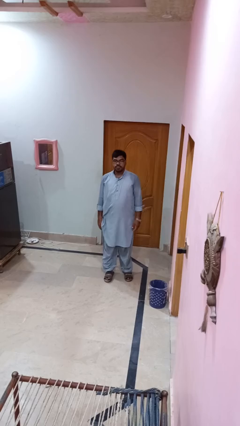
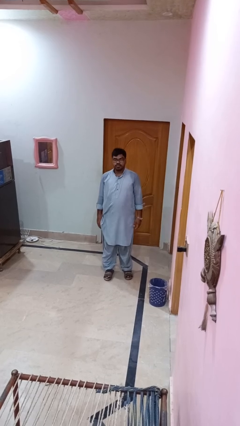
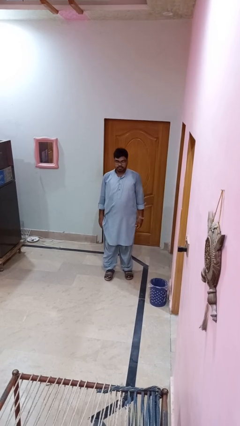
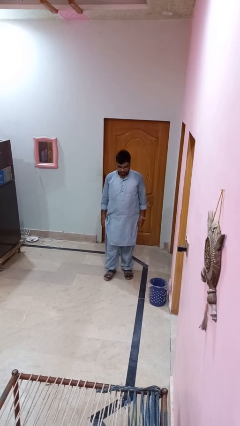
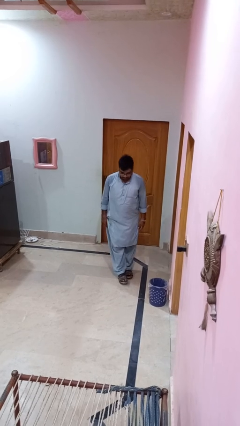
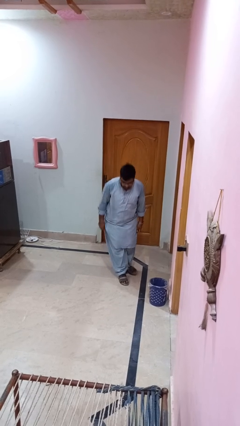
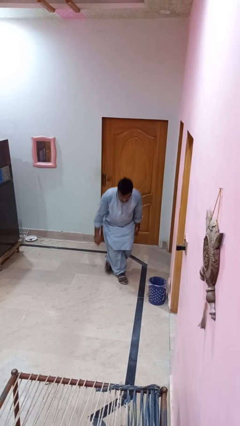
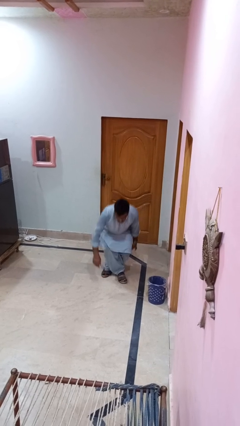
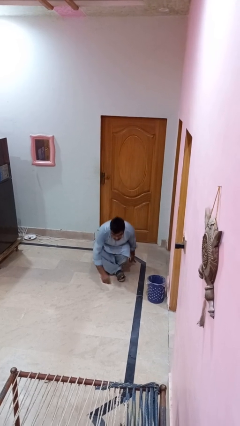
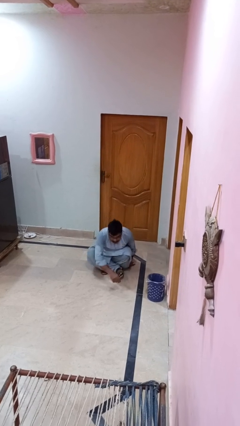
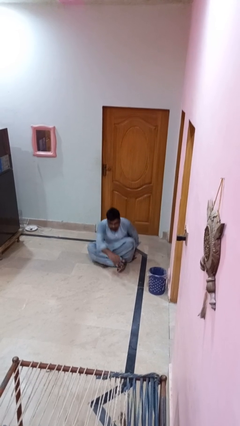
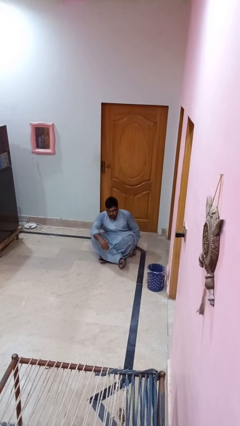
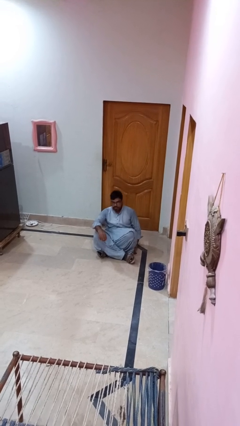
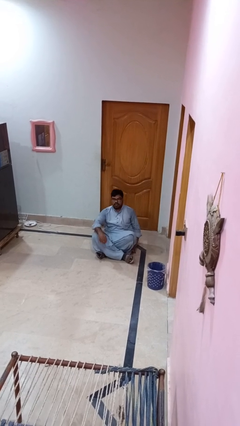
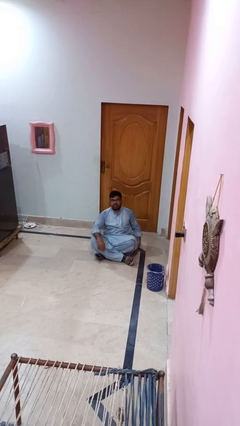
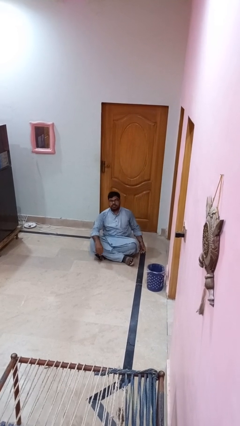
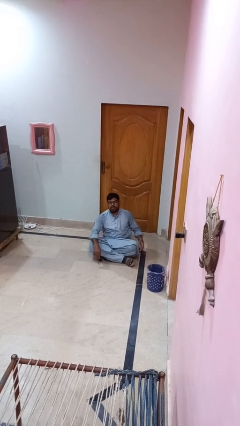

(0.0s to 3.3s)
person sits crisscross

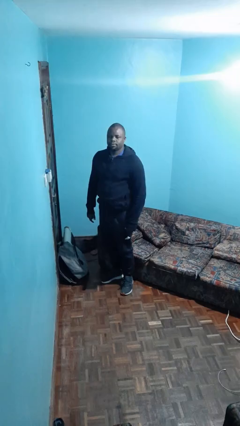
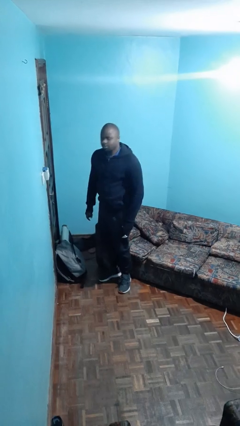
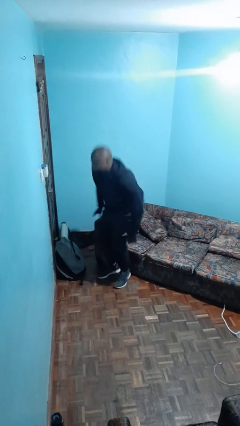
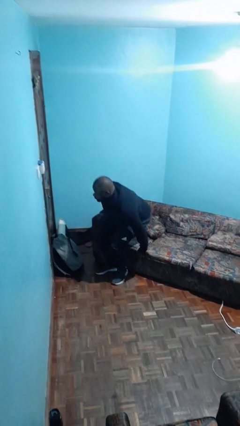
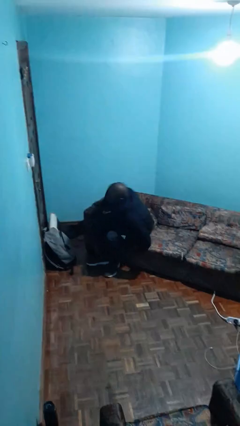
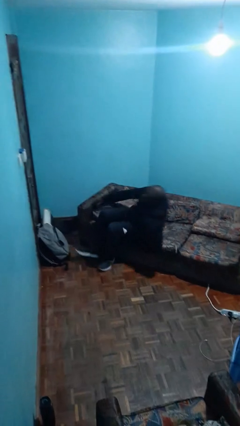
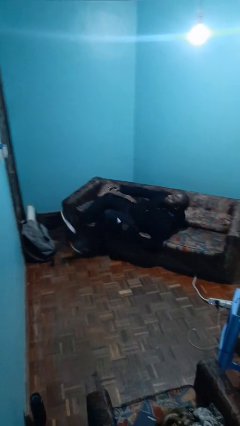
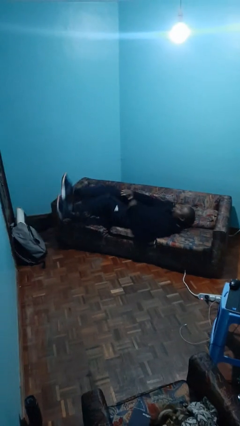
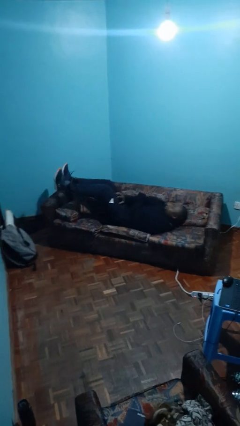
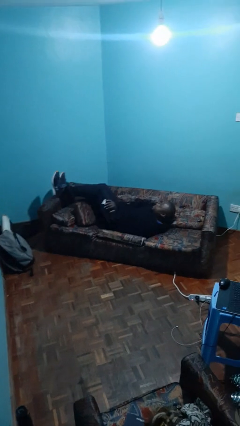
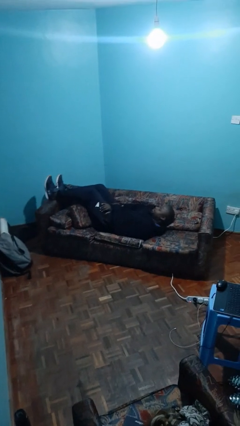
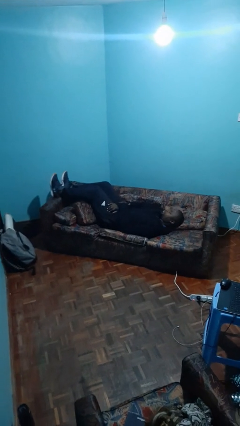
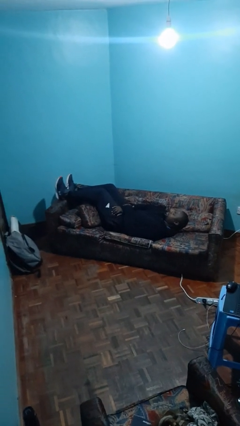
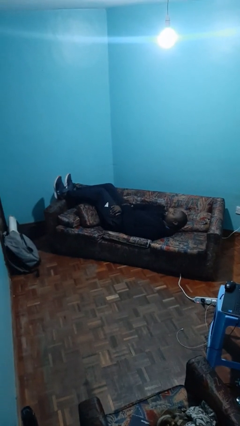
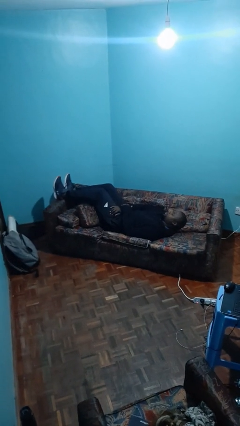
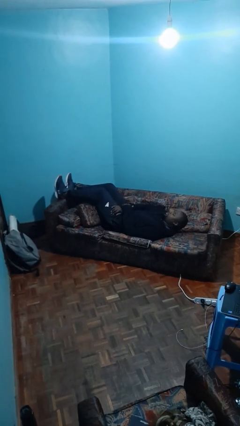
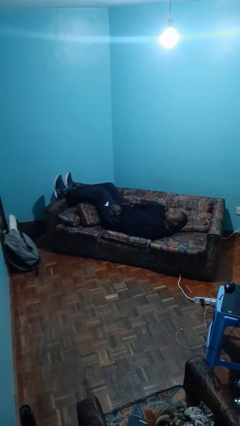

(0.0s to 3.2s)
person lies down on couch

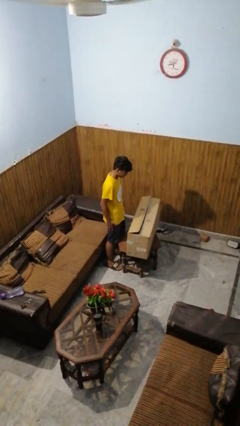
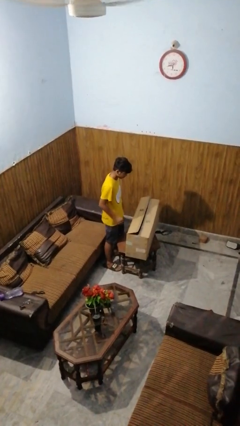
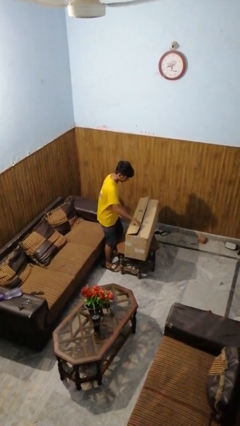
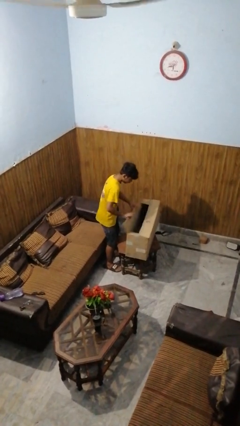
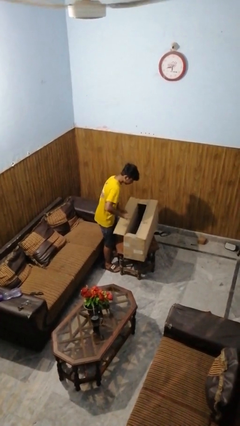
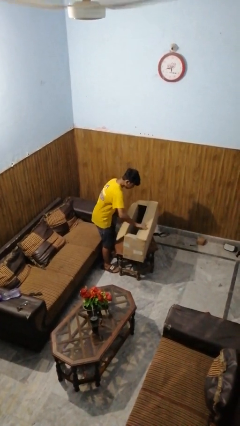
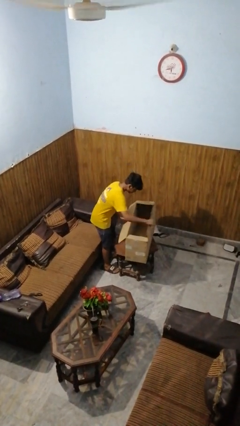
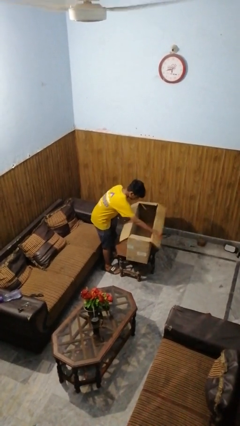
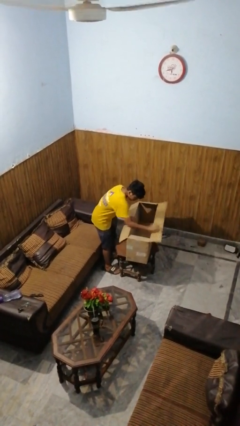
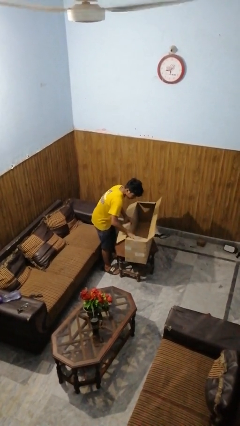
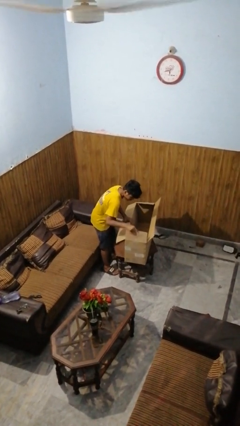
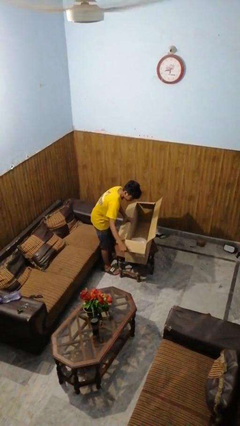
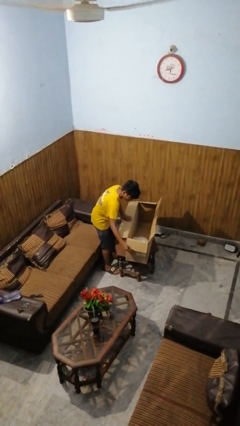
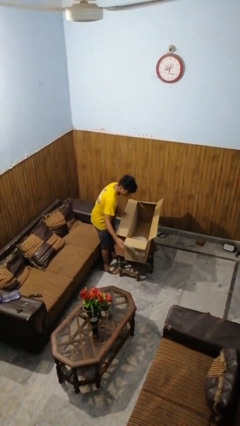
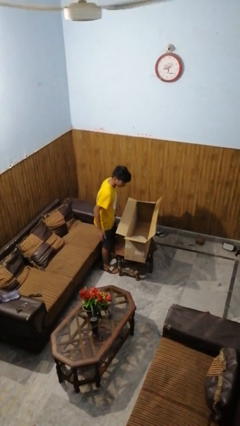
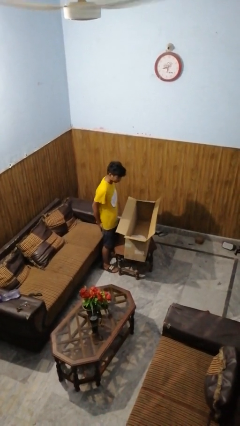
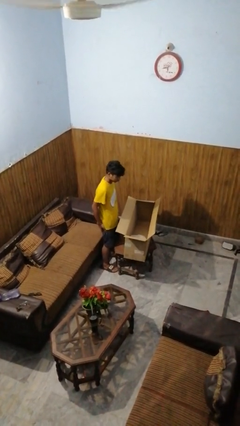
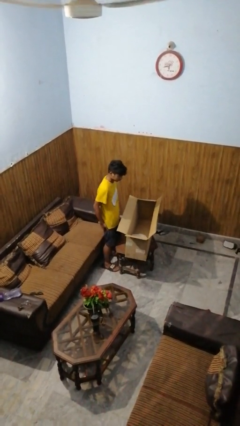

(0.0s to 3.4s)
person opens box

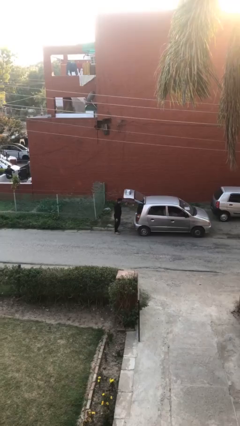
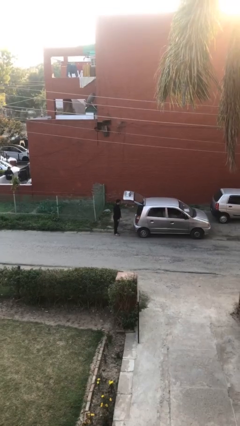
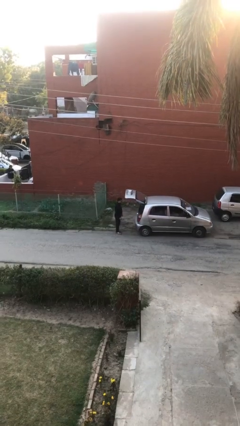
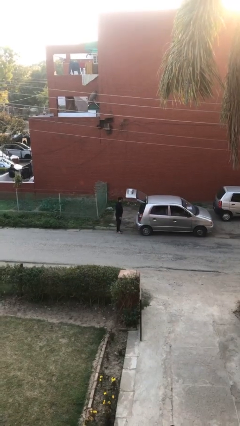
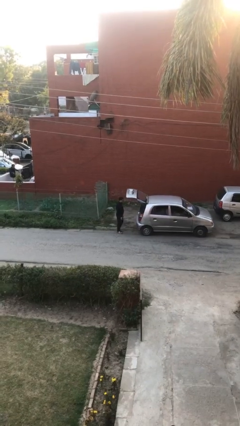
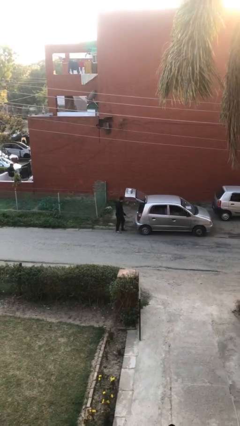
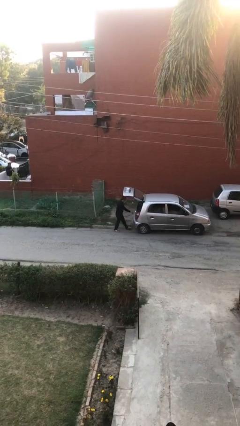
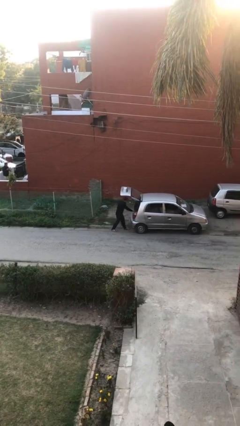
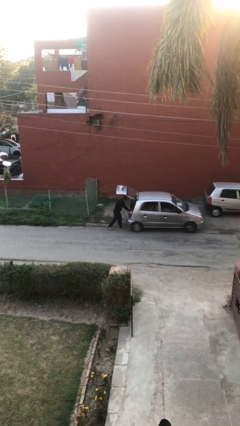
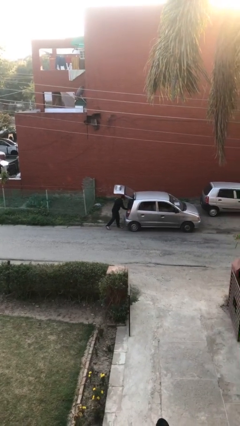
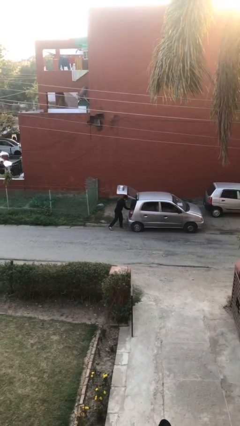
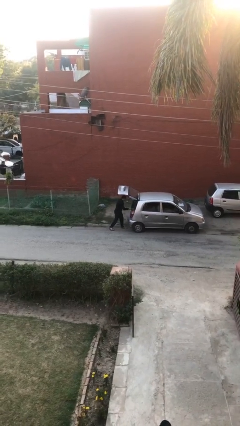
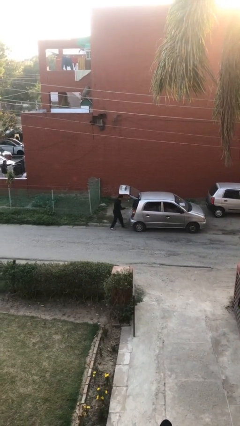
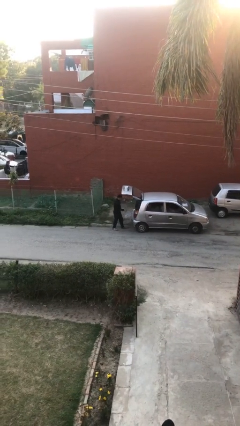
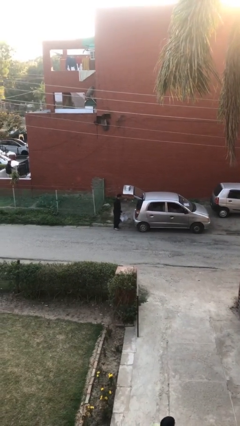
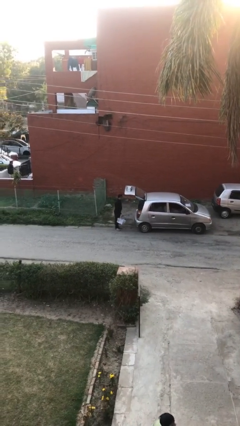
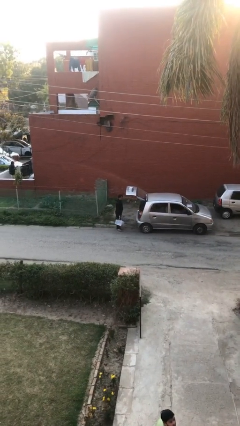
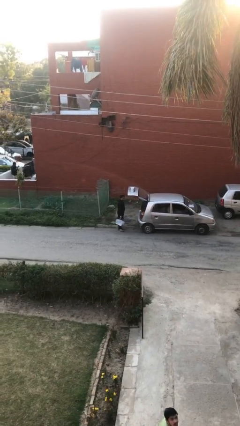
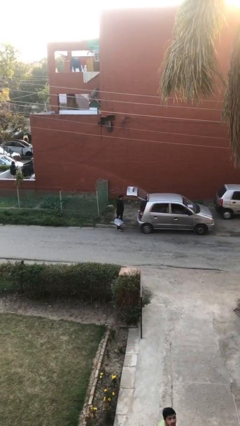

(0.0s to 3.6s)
person unloads car

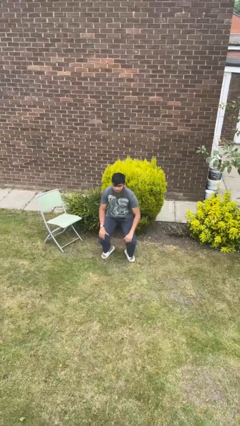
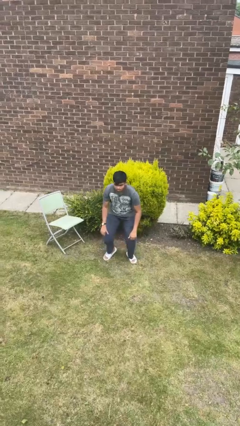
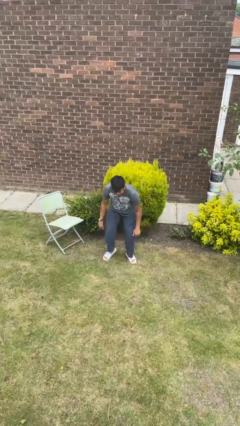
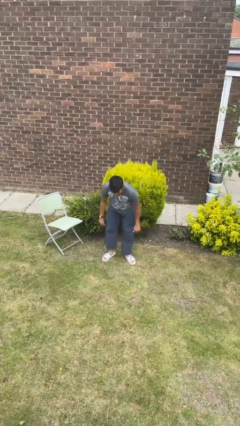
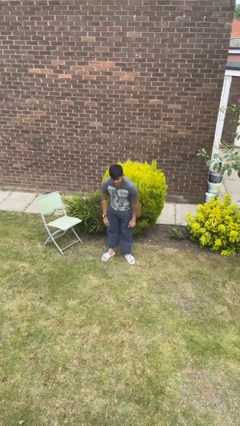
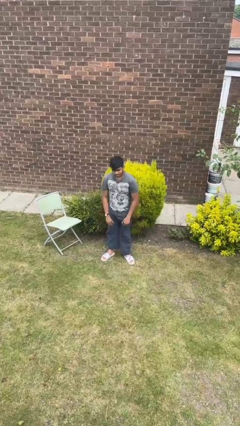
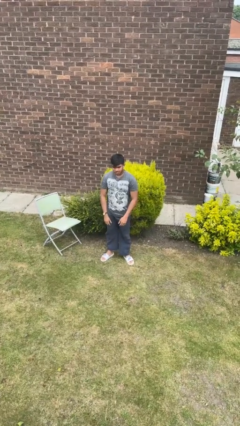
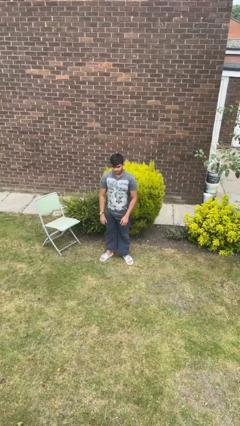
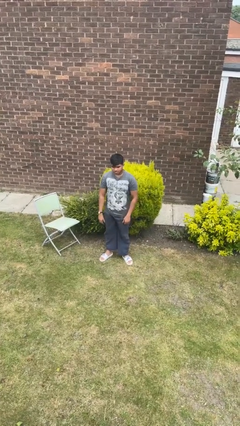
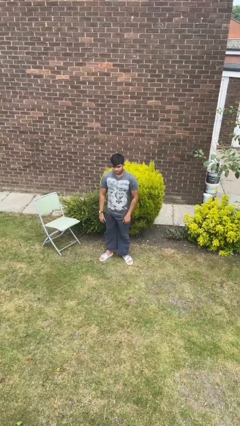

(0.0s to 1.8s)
person stands up

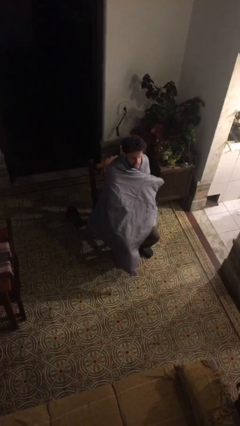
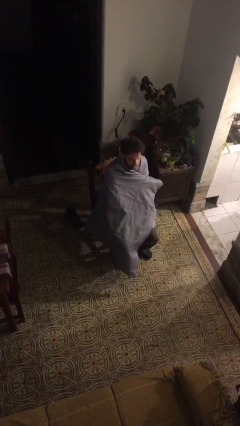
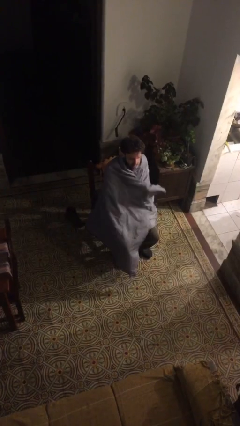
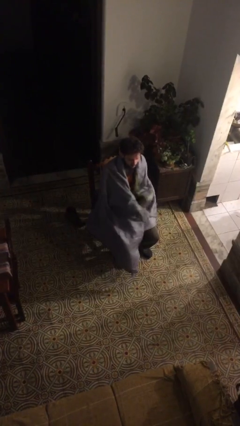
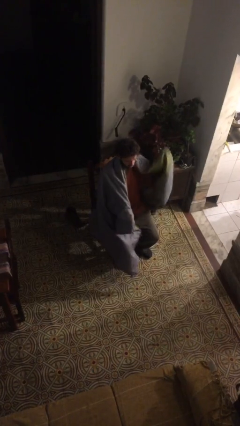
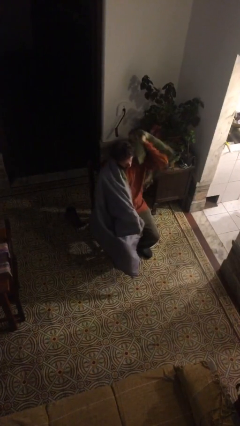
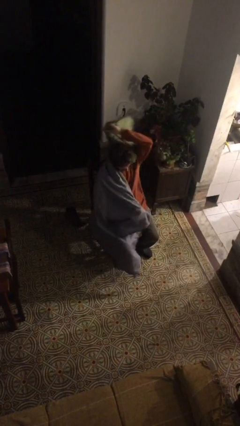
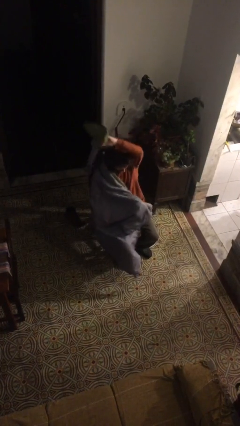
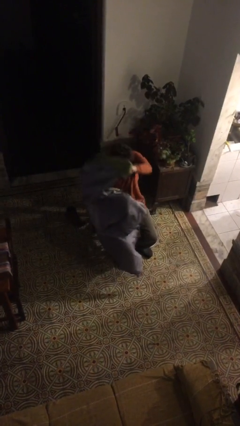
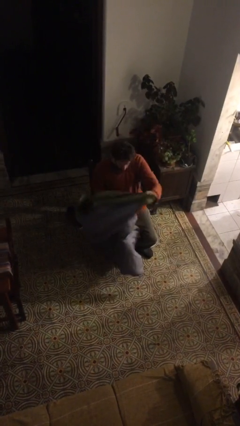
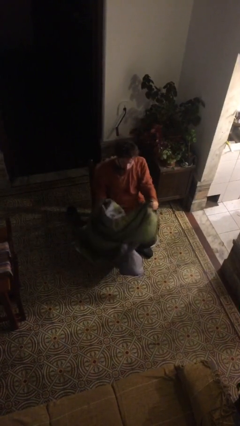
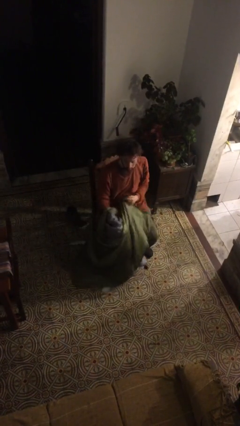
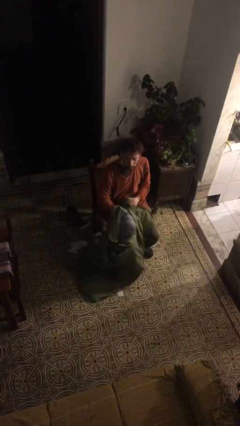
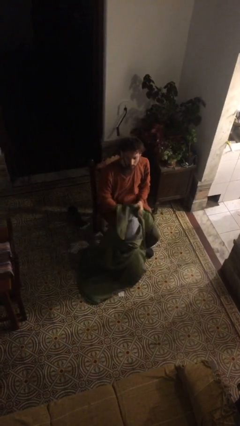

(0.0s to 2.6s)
person uncovers with blanket
